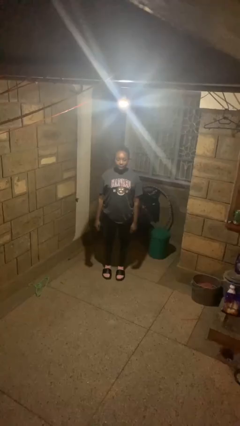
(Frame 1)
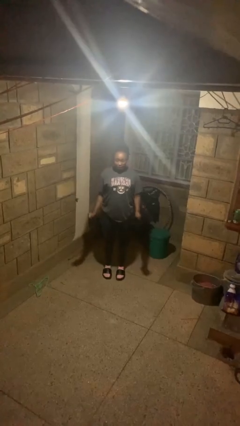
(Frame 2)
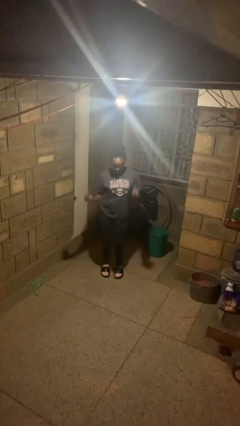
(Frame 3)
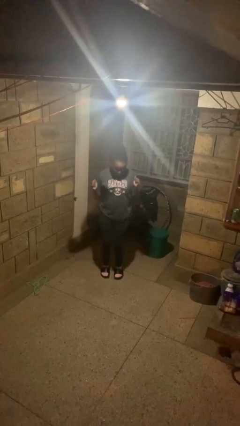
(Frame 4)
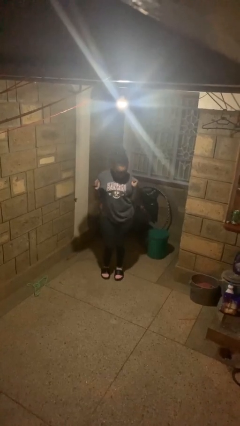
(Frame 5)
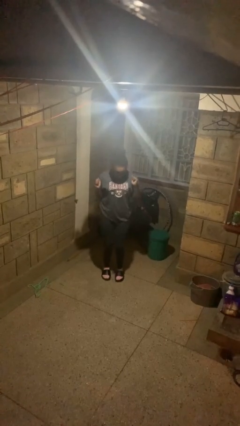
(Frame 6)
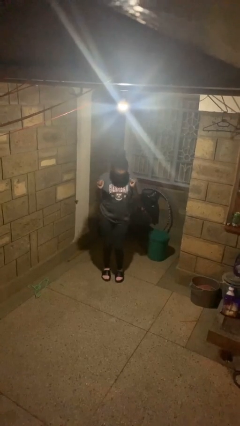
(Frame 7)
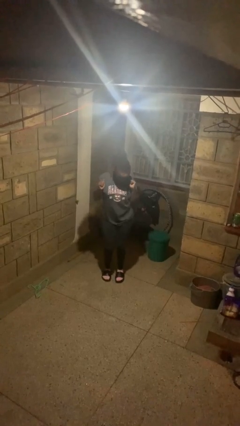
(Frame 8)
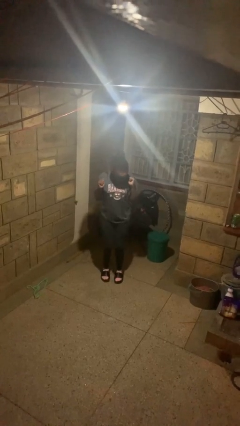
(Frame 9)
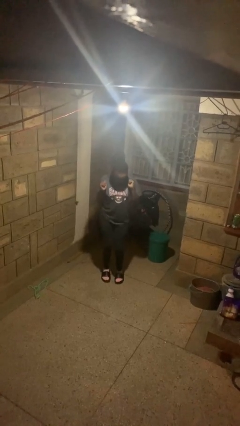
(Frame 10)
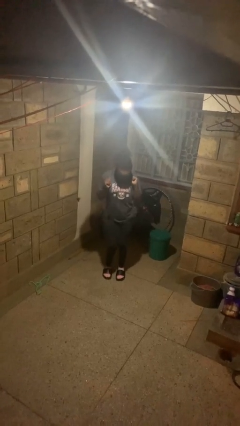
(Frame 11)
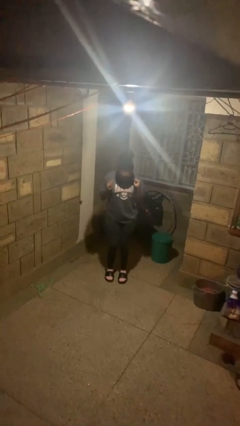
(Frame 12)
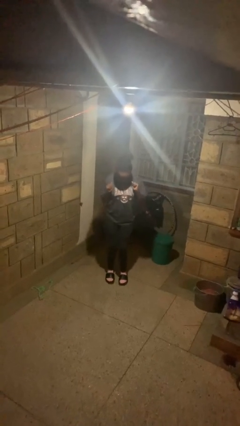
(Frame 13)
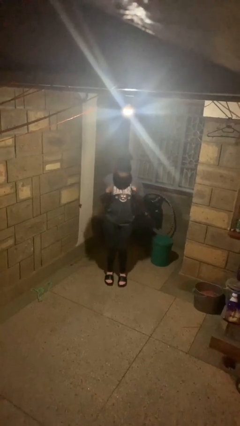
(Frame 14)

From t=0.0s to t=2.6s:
person wiggles hips

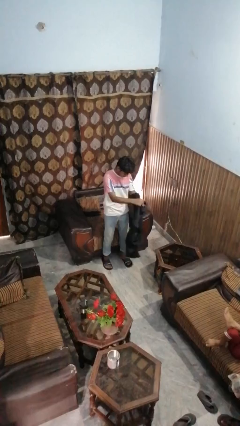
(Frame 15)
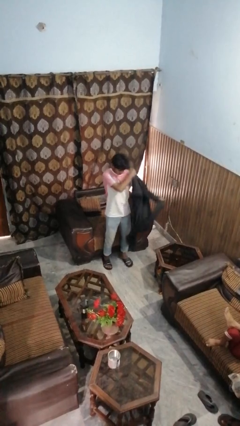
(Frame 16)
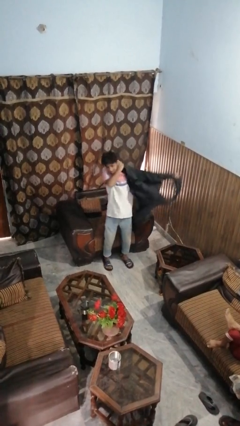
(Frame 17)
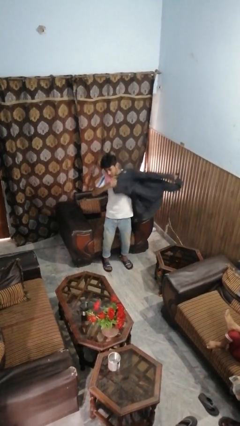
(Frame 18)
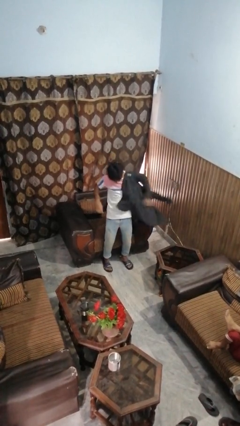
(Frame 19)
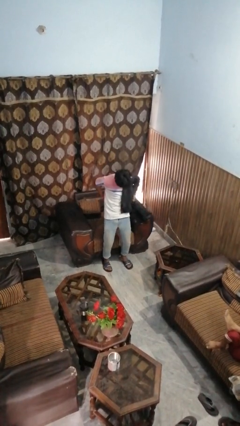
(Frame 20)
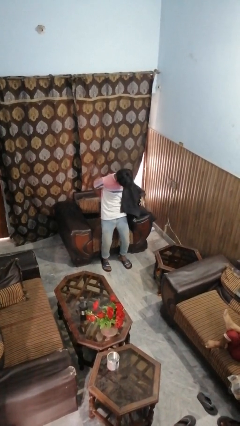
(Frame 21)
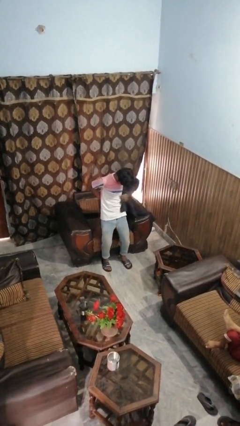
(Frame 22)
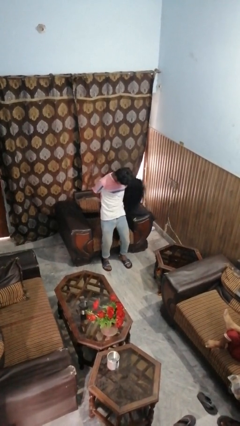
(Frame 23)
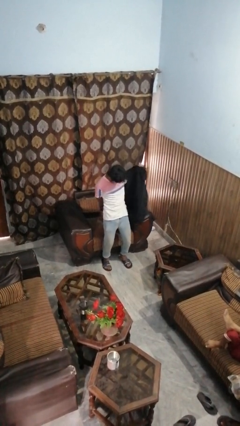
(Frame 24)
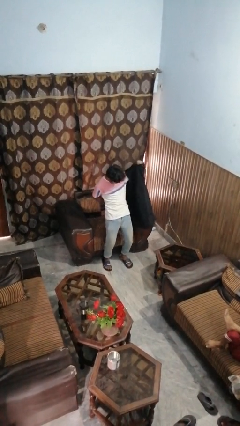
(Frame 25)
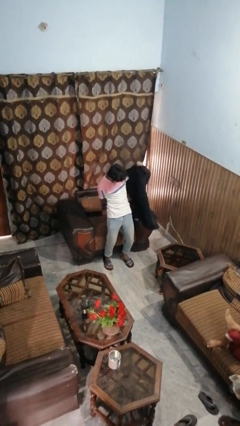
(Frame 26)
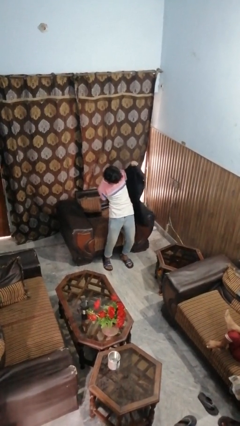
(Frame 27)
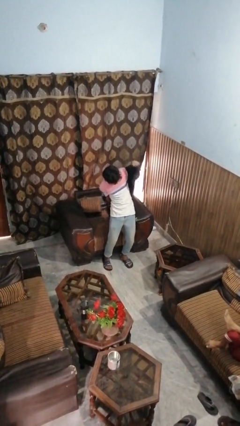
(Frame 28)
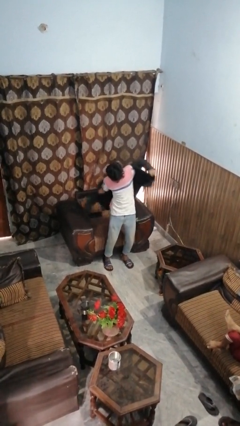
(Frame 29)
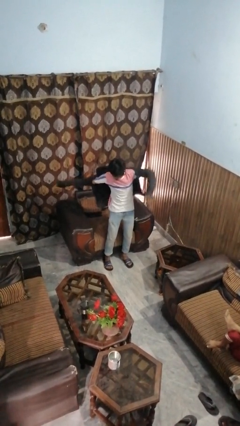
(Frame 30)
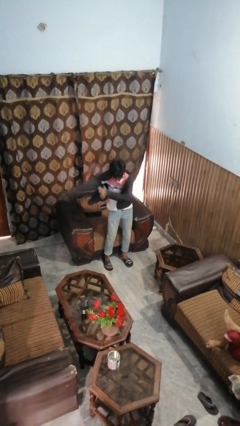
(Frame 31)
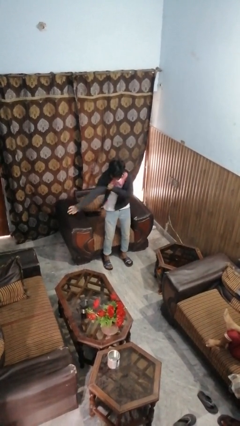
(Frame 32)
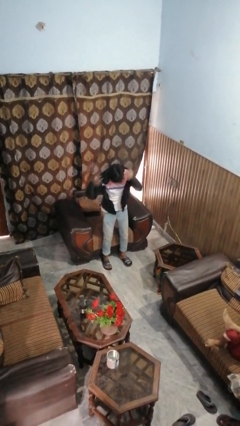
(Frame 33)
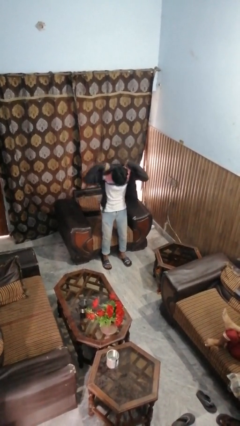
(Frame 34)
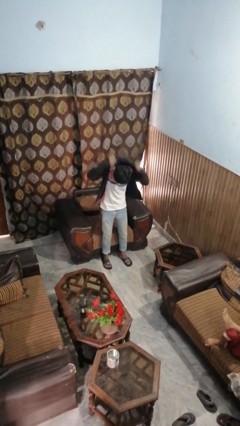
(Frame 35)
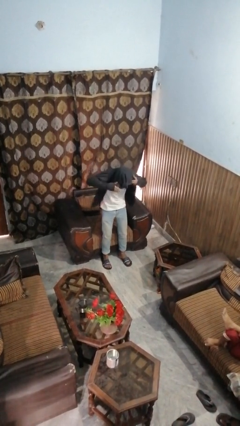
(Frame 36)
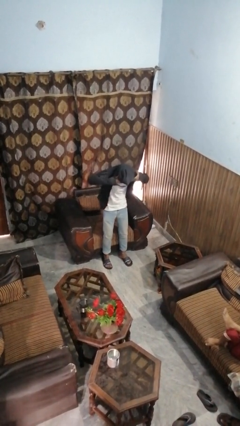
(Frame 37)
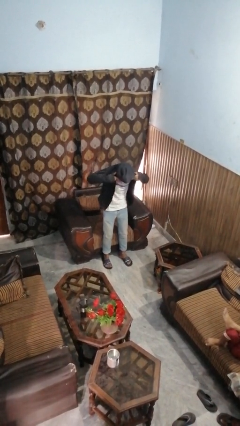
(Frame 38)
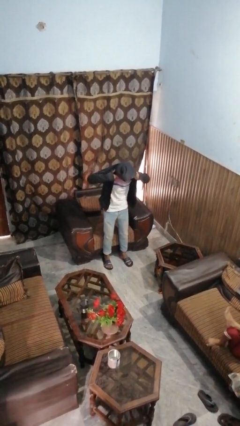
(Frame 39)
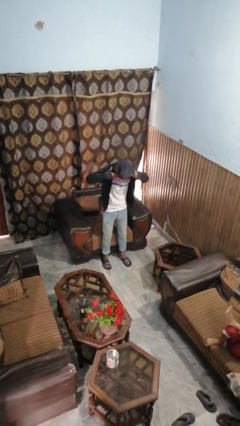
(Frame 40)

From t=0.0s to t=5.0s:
person puts on hoodie

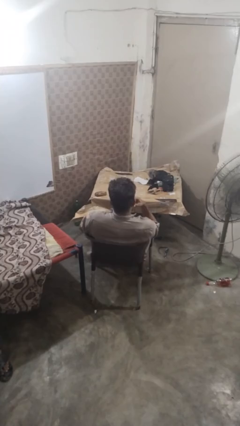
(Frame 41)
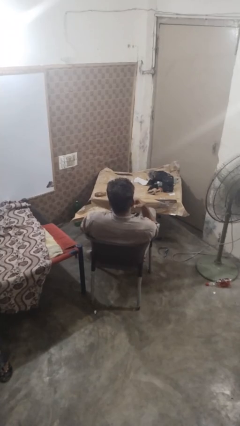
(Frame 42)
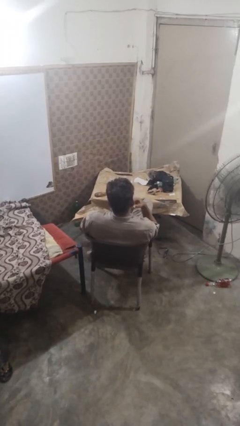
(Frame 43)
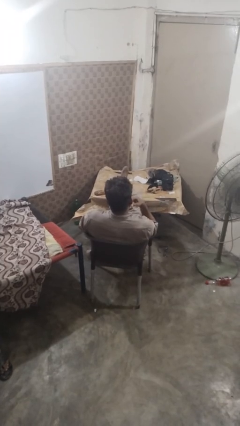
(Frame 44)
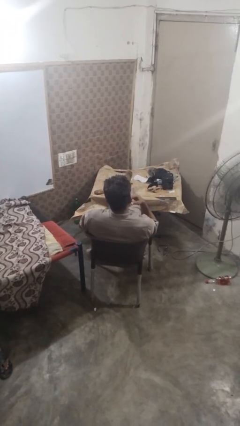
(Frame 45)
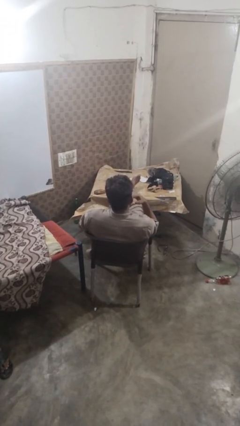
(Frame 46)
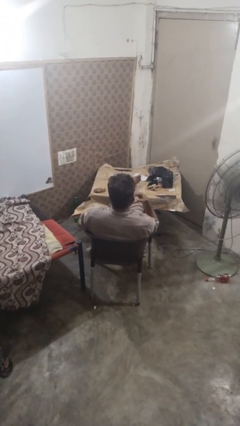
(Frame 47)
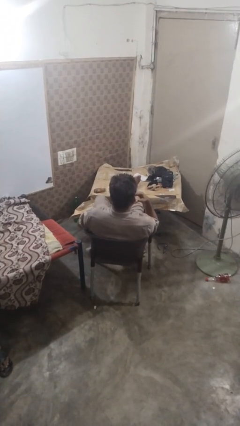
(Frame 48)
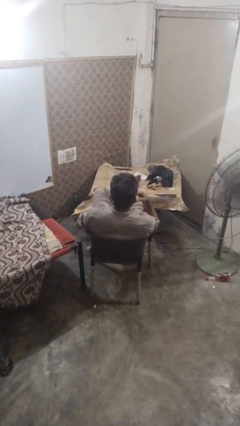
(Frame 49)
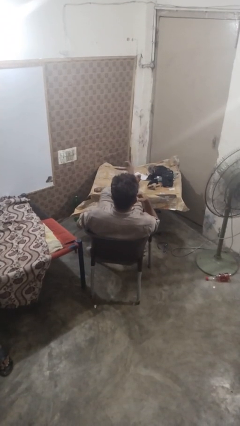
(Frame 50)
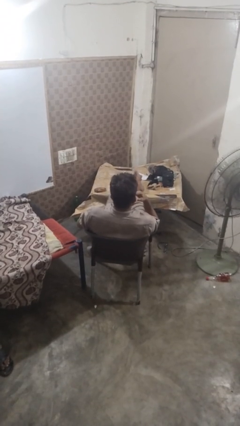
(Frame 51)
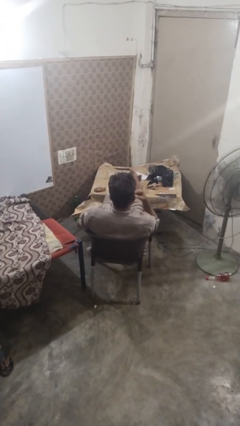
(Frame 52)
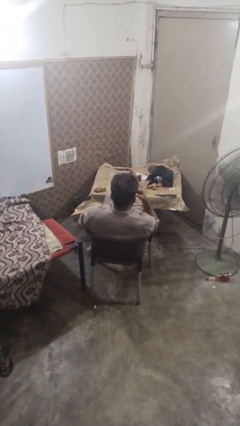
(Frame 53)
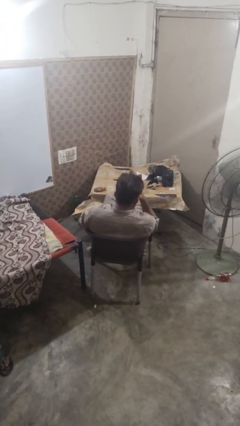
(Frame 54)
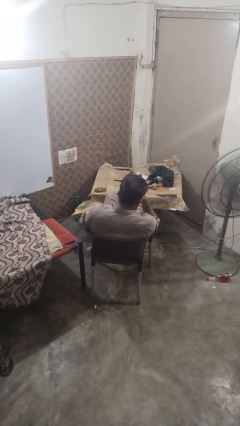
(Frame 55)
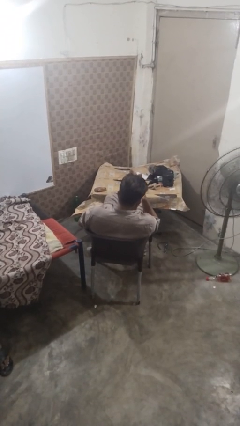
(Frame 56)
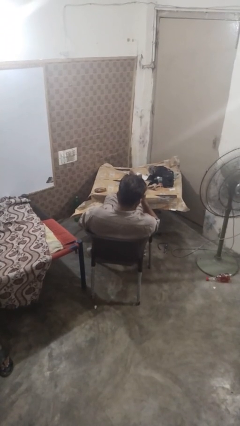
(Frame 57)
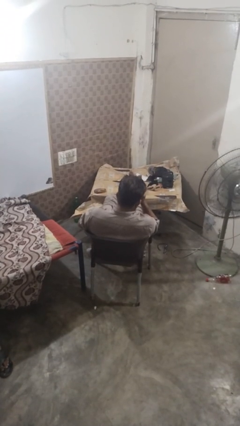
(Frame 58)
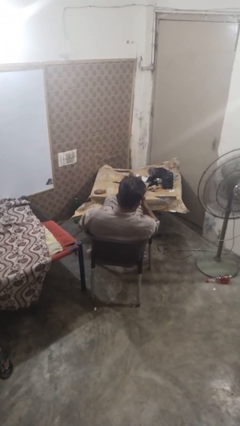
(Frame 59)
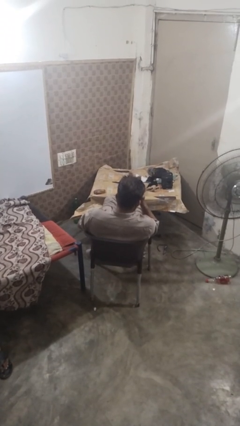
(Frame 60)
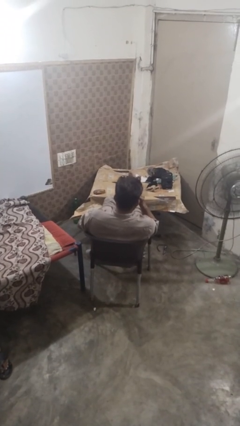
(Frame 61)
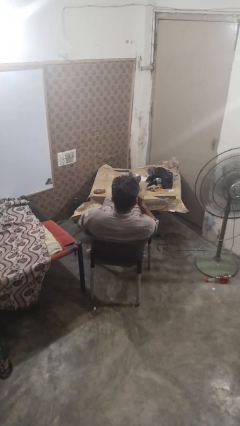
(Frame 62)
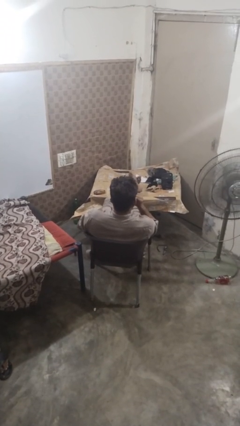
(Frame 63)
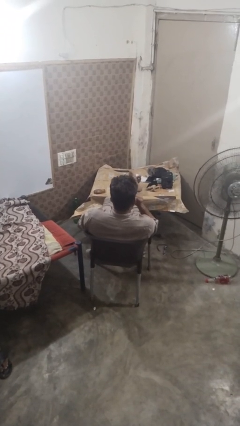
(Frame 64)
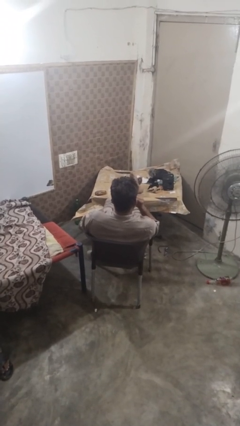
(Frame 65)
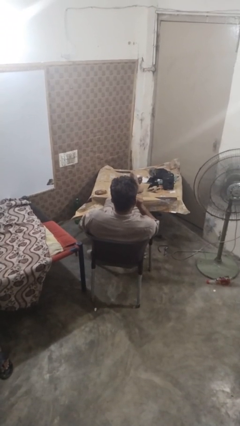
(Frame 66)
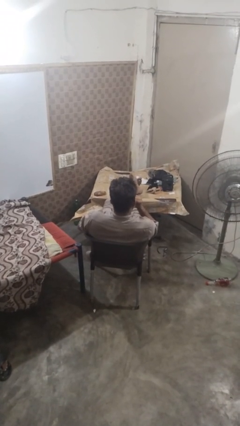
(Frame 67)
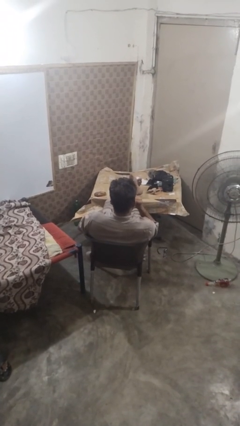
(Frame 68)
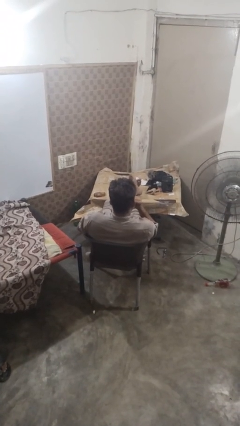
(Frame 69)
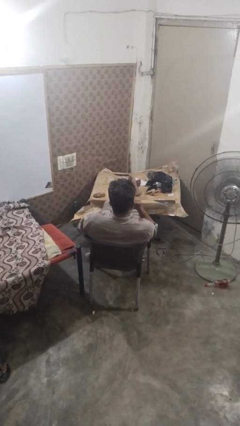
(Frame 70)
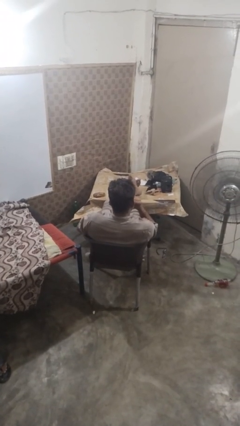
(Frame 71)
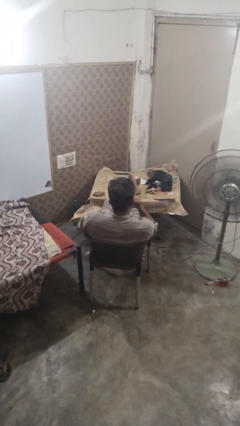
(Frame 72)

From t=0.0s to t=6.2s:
person puts feet up

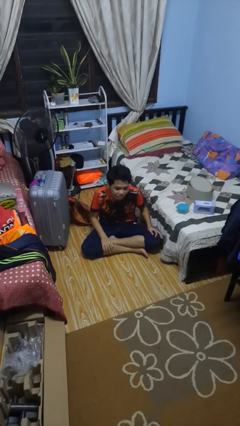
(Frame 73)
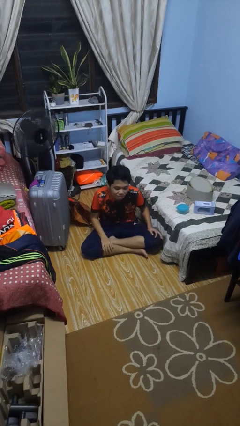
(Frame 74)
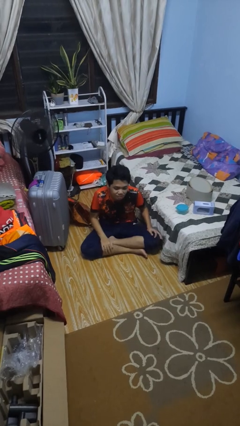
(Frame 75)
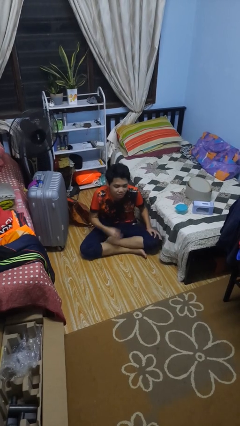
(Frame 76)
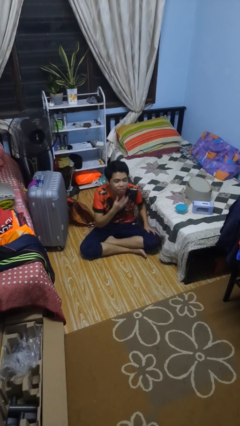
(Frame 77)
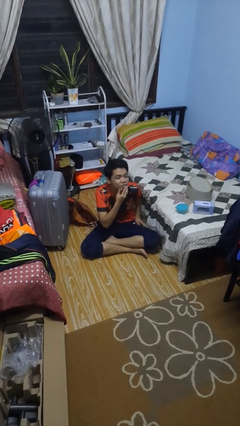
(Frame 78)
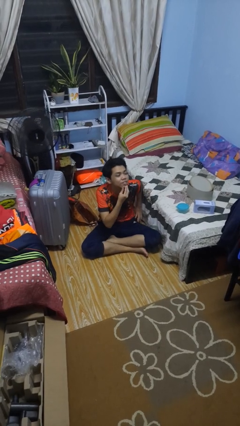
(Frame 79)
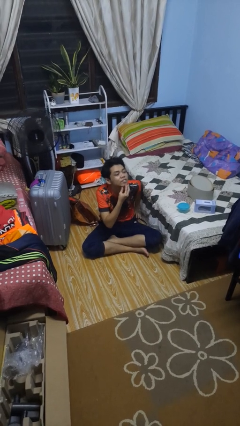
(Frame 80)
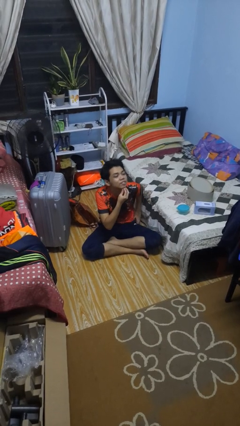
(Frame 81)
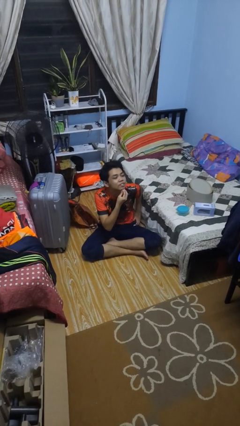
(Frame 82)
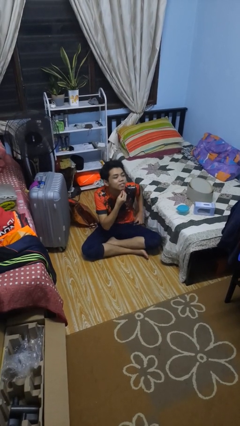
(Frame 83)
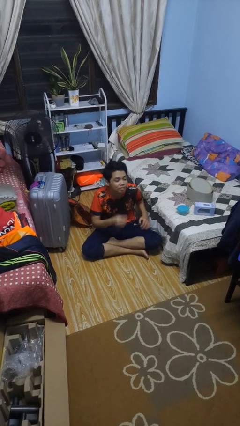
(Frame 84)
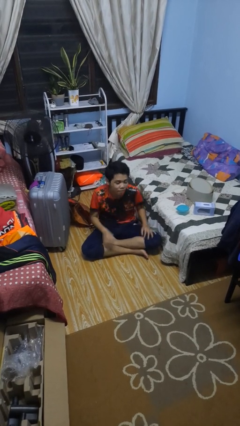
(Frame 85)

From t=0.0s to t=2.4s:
person strokes chin

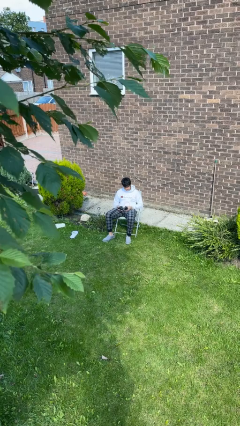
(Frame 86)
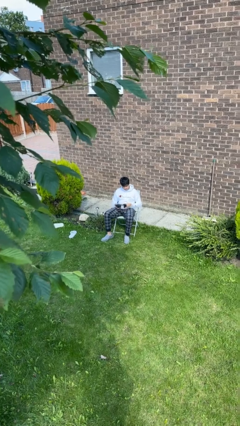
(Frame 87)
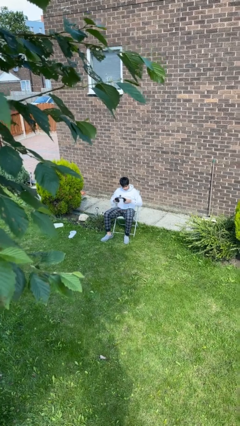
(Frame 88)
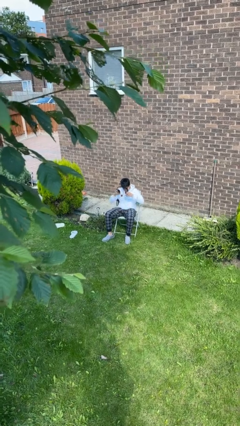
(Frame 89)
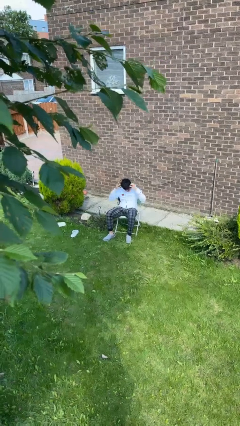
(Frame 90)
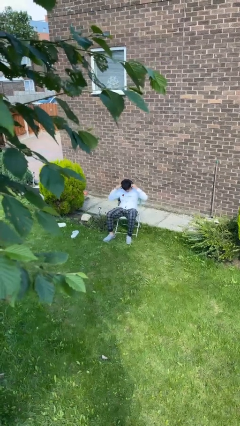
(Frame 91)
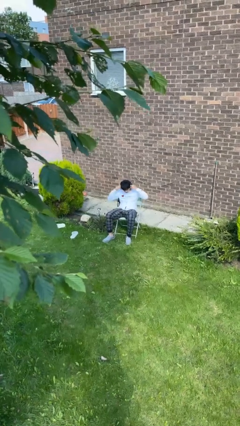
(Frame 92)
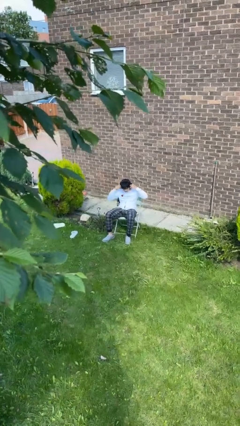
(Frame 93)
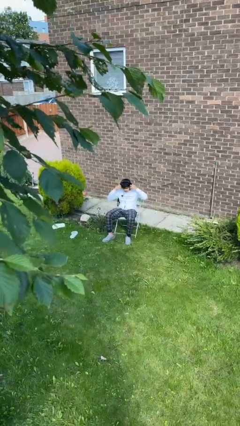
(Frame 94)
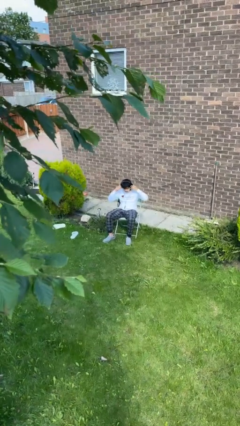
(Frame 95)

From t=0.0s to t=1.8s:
person puts on headphones
